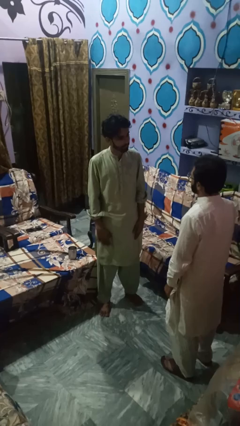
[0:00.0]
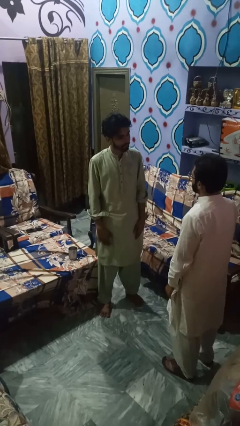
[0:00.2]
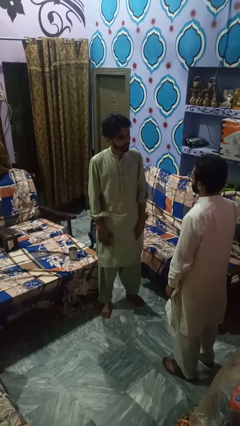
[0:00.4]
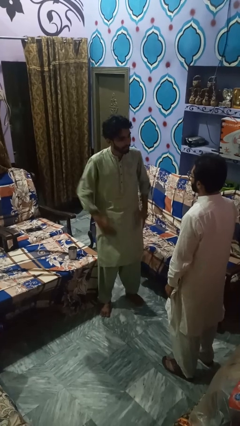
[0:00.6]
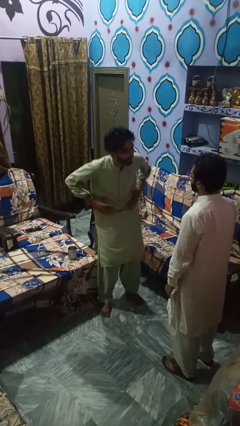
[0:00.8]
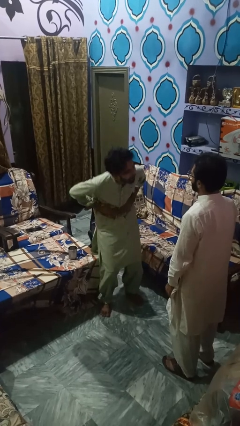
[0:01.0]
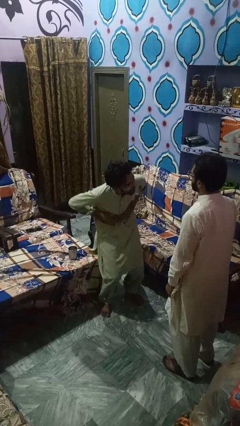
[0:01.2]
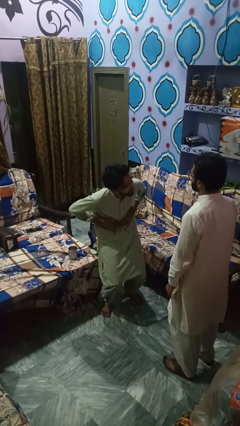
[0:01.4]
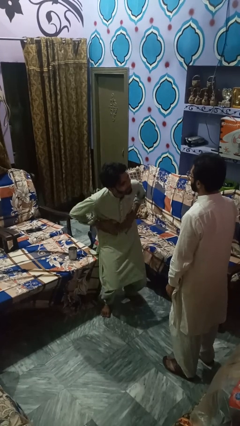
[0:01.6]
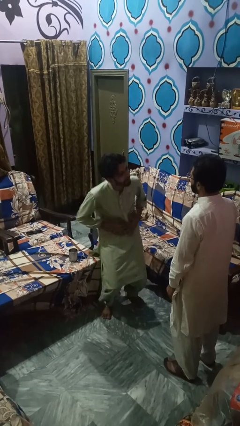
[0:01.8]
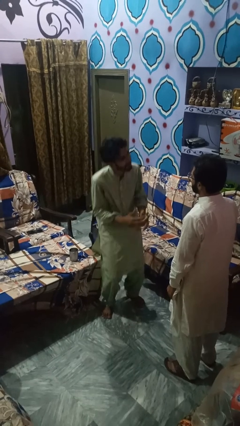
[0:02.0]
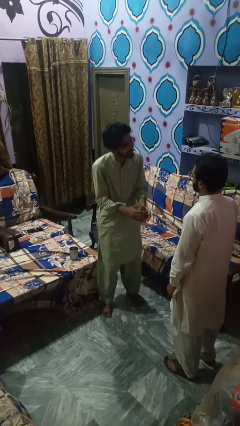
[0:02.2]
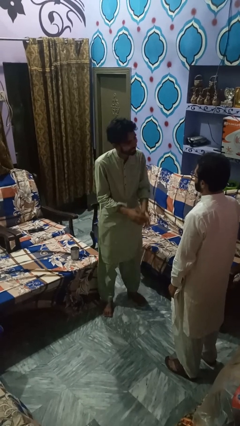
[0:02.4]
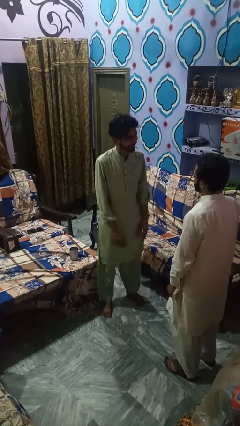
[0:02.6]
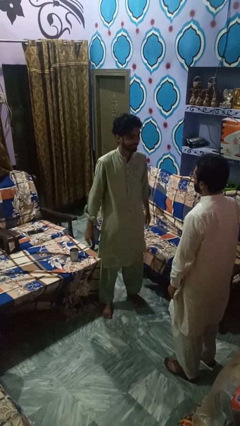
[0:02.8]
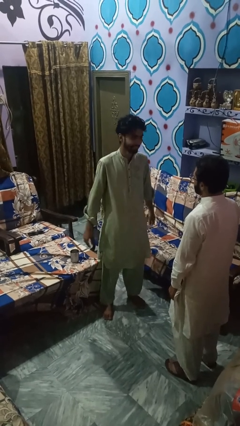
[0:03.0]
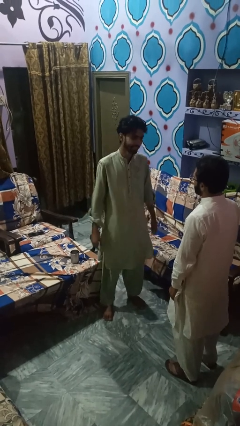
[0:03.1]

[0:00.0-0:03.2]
person laughs with person

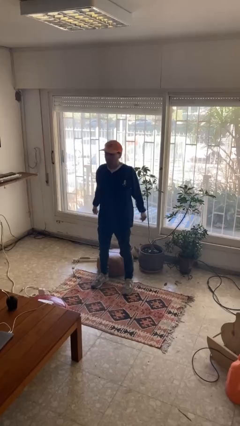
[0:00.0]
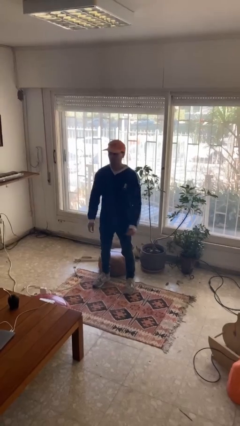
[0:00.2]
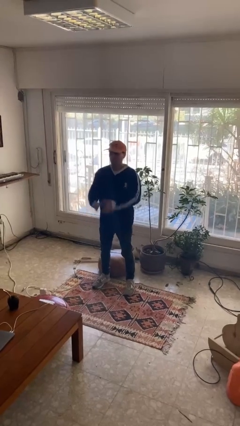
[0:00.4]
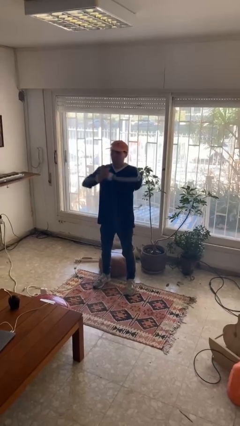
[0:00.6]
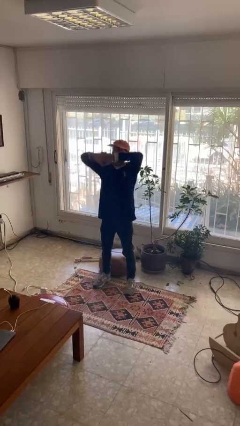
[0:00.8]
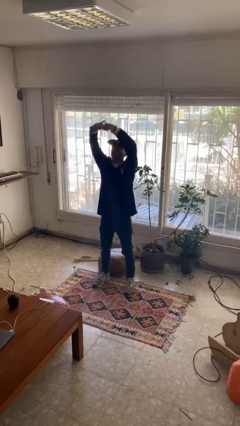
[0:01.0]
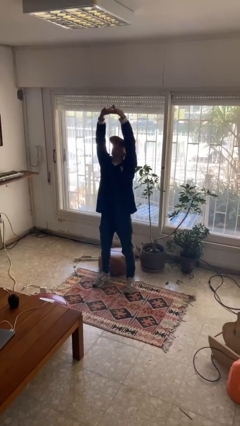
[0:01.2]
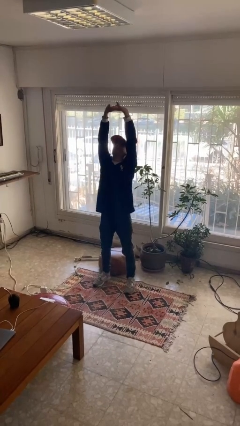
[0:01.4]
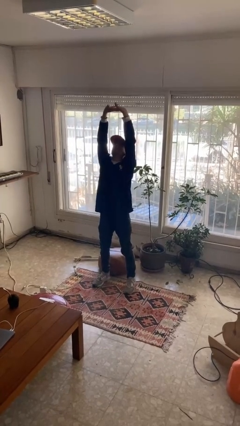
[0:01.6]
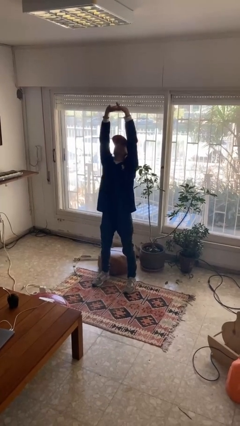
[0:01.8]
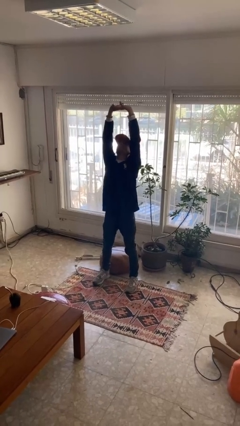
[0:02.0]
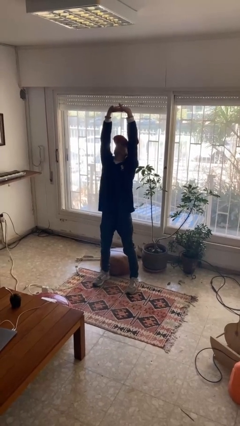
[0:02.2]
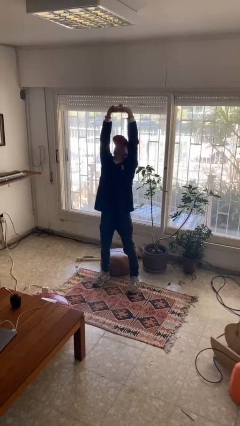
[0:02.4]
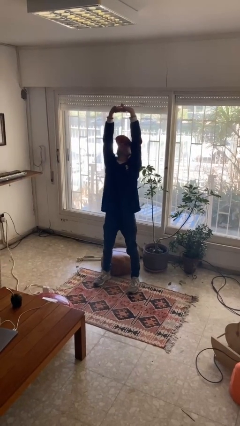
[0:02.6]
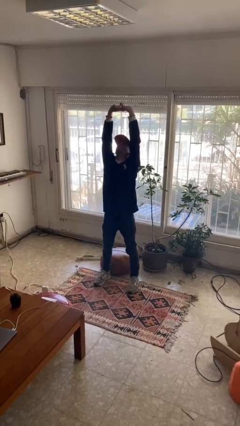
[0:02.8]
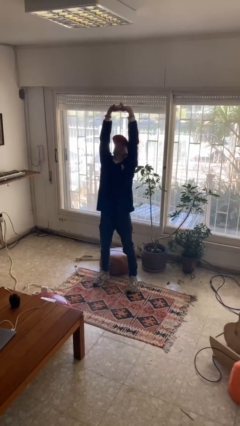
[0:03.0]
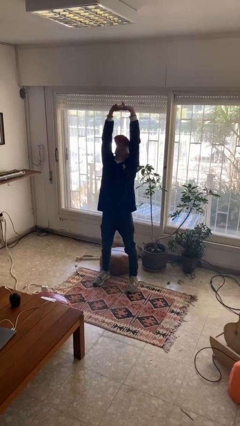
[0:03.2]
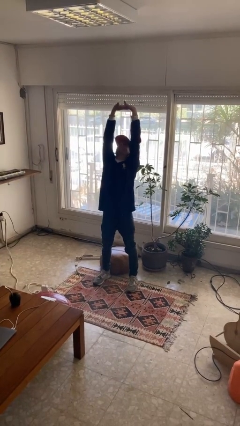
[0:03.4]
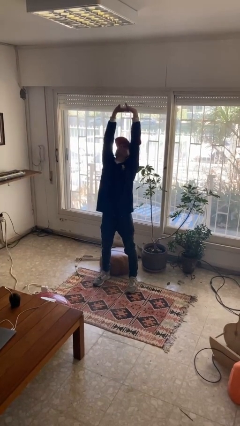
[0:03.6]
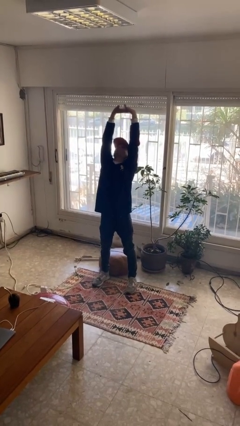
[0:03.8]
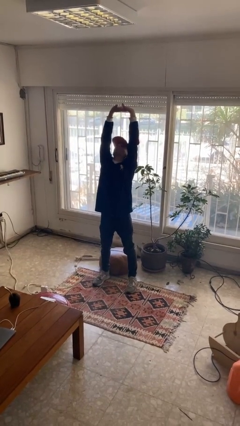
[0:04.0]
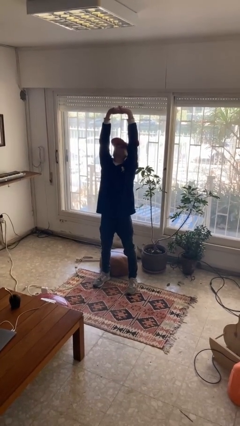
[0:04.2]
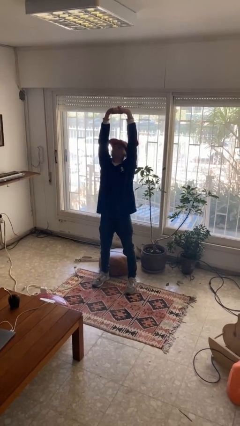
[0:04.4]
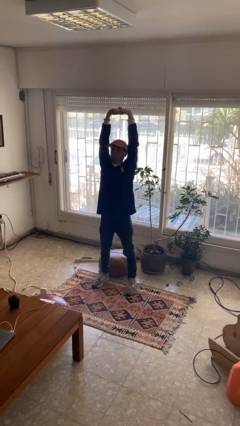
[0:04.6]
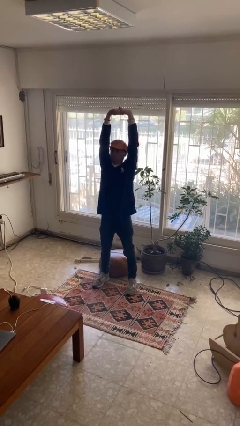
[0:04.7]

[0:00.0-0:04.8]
person stretches arms over head

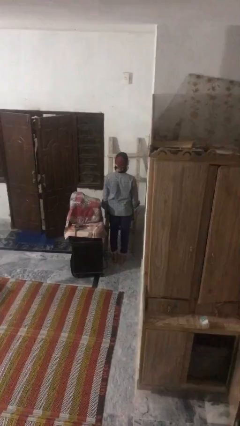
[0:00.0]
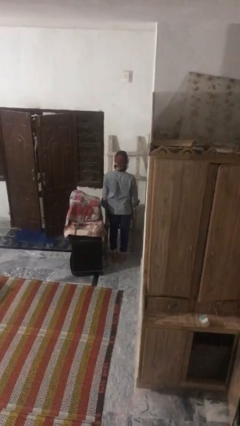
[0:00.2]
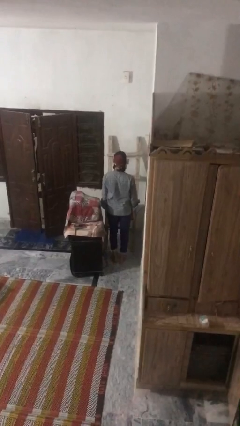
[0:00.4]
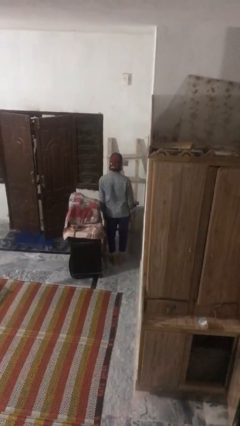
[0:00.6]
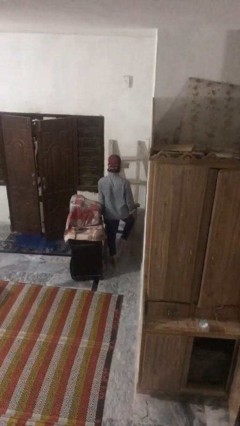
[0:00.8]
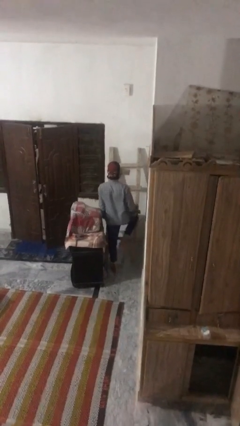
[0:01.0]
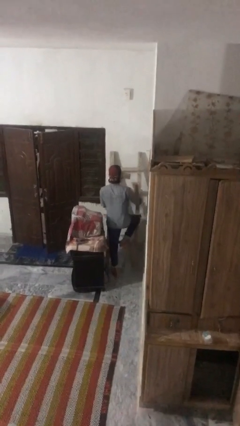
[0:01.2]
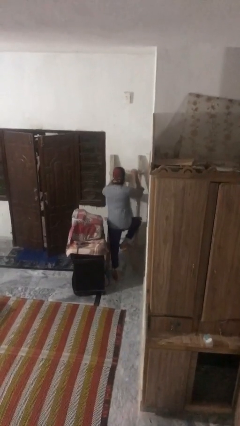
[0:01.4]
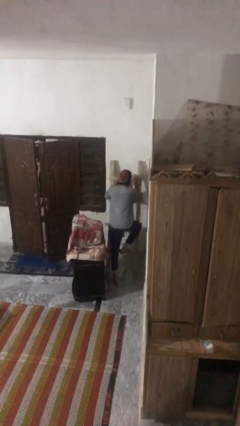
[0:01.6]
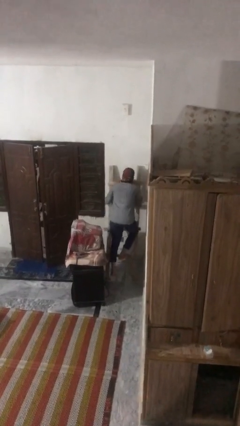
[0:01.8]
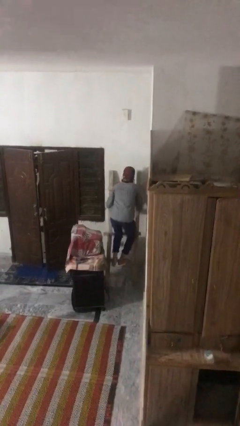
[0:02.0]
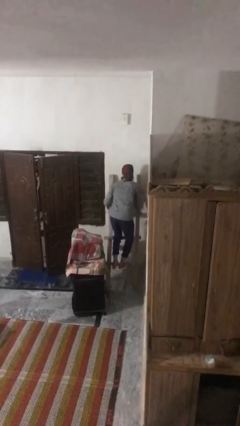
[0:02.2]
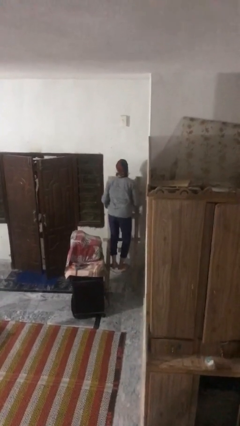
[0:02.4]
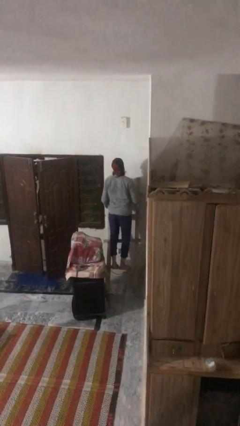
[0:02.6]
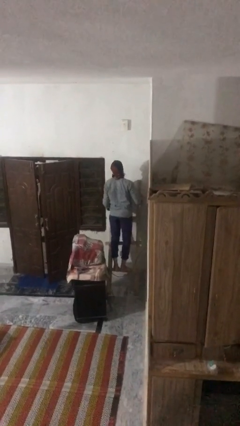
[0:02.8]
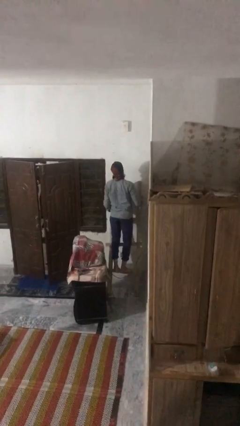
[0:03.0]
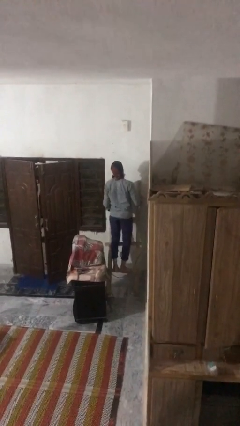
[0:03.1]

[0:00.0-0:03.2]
person climbs up ladder

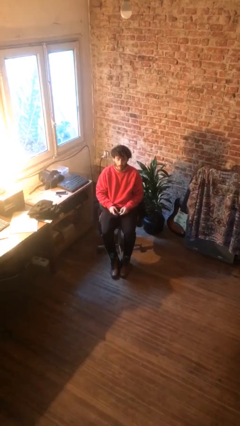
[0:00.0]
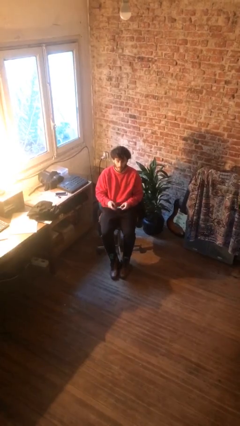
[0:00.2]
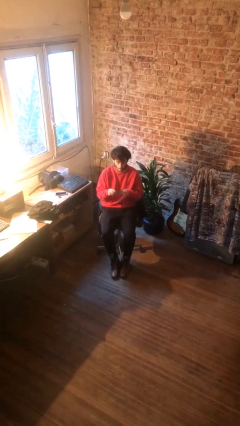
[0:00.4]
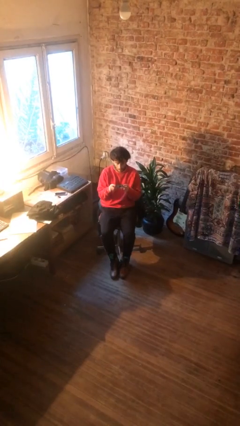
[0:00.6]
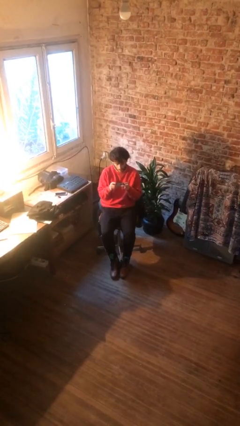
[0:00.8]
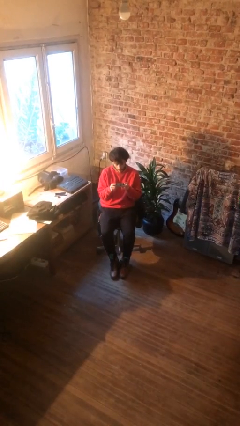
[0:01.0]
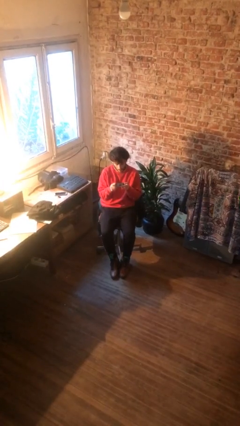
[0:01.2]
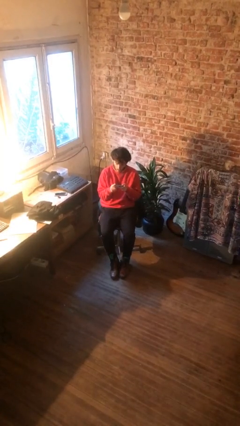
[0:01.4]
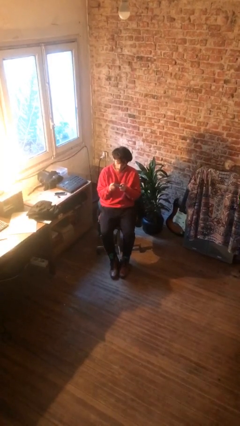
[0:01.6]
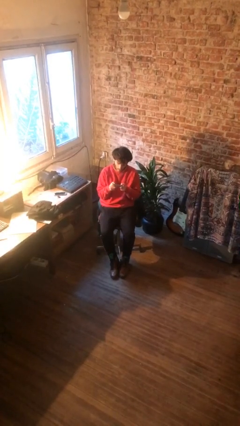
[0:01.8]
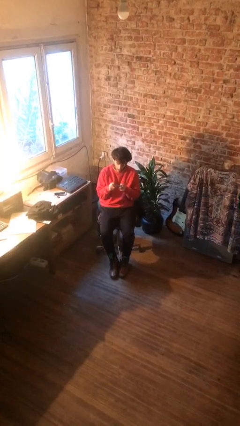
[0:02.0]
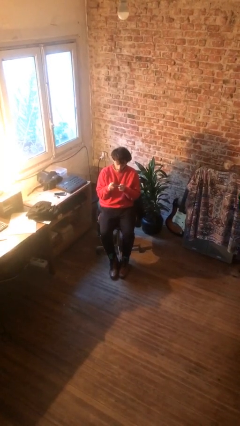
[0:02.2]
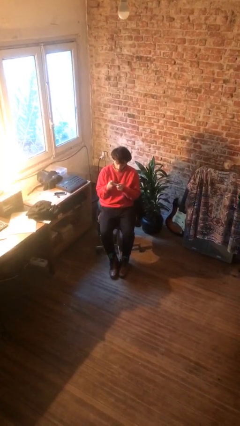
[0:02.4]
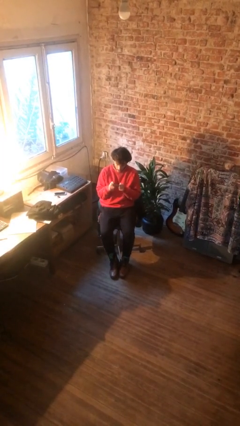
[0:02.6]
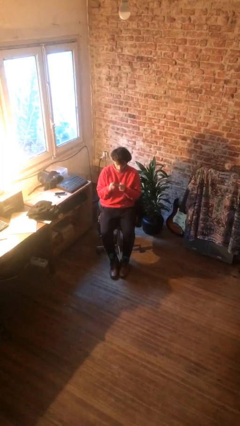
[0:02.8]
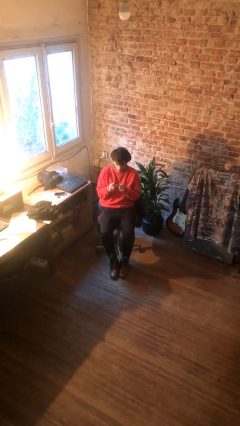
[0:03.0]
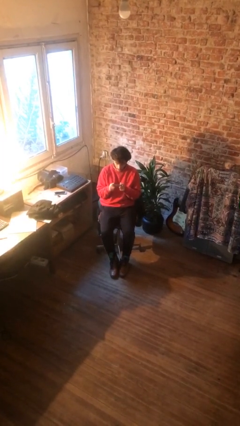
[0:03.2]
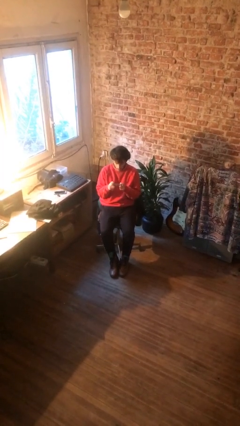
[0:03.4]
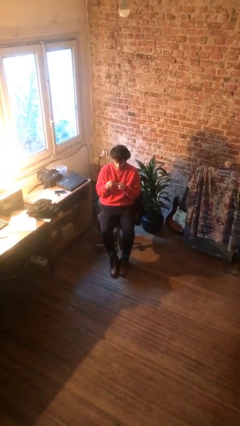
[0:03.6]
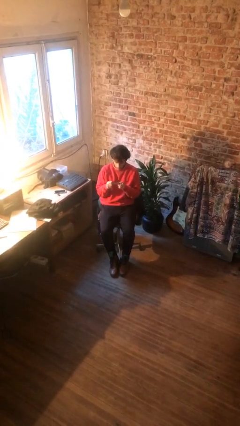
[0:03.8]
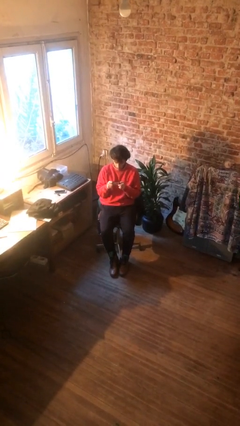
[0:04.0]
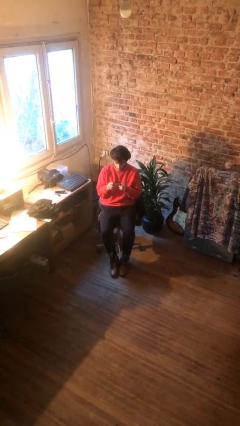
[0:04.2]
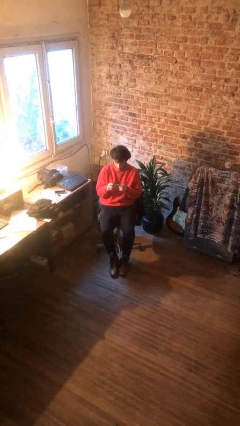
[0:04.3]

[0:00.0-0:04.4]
person interacts with handheld game

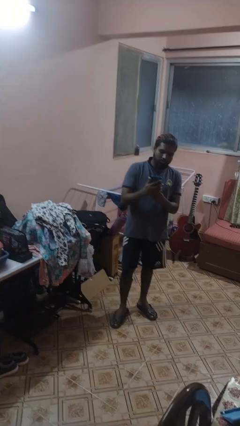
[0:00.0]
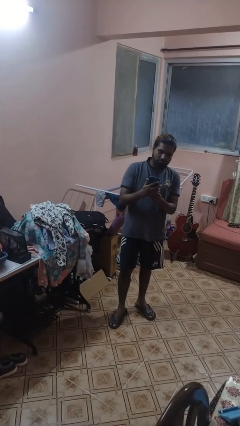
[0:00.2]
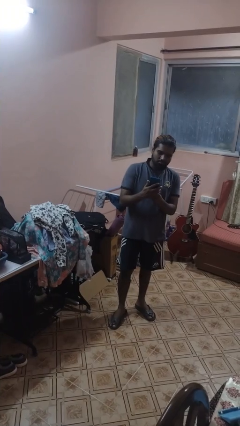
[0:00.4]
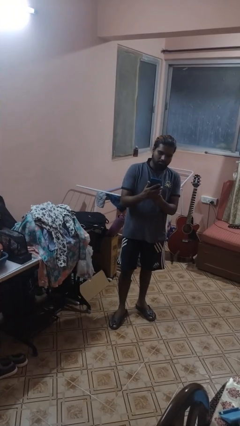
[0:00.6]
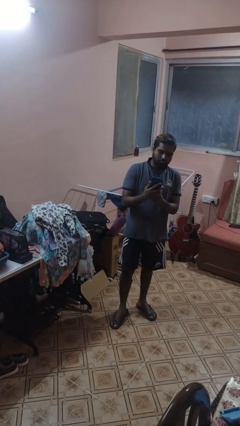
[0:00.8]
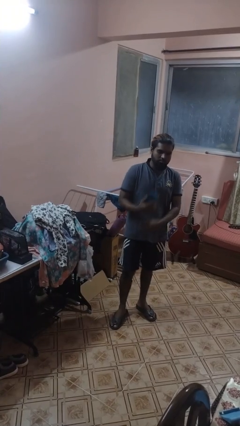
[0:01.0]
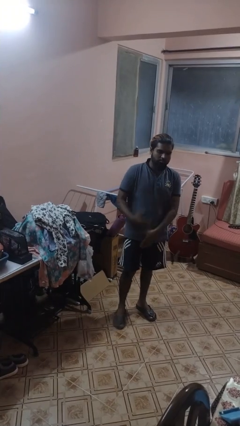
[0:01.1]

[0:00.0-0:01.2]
person takes phone from pocket

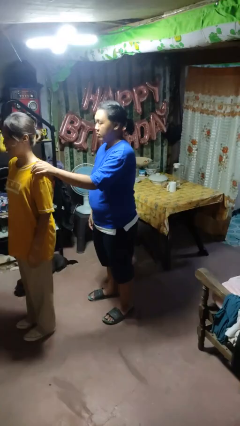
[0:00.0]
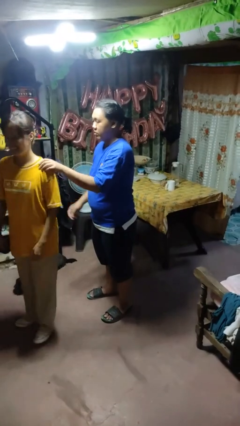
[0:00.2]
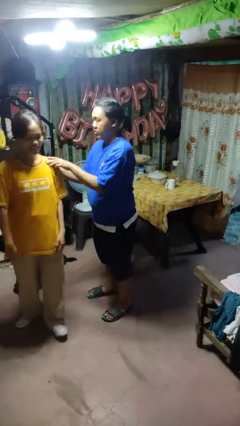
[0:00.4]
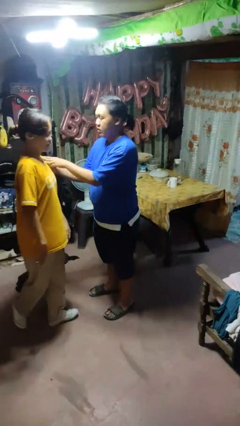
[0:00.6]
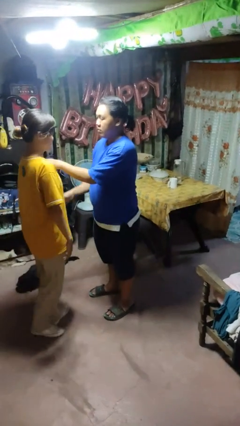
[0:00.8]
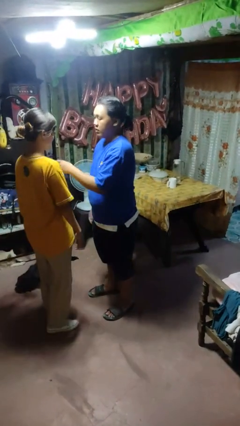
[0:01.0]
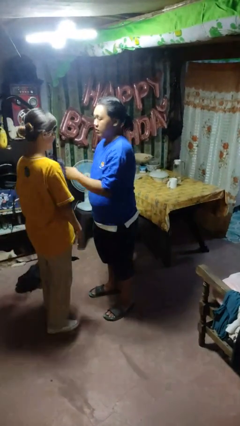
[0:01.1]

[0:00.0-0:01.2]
person spins person around
